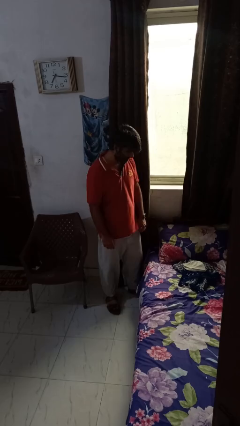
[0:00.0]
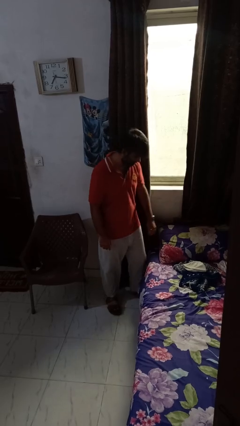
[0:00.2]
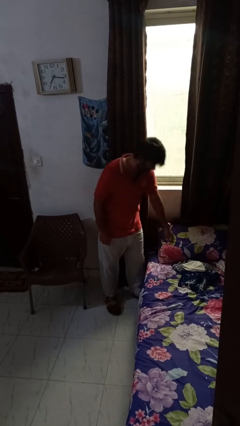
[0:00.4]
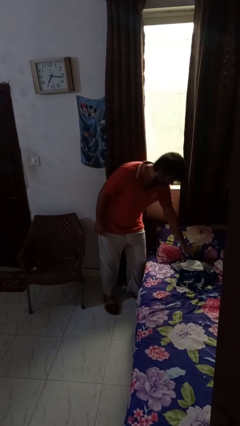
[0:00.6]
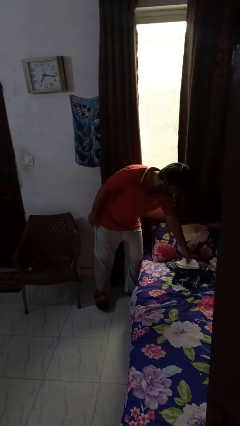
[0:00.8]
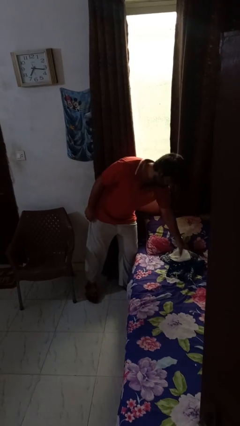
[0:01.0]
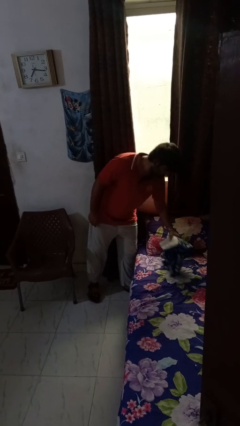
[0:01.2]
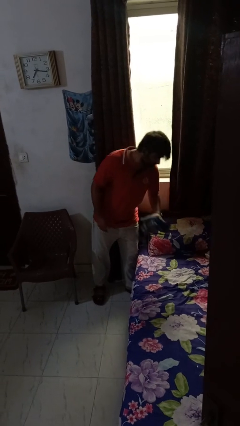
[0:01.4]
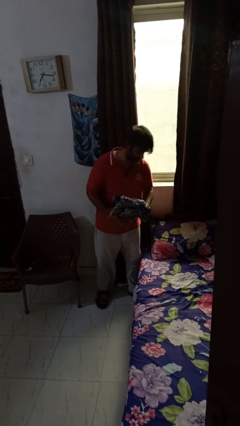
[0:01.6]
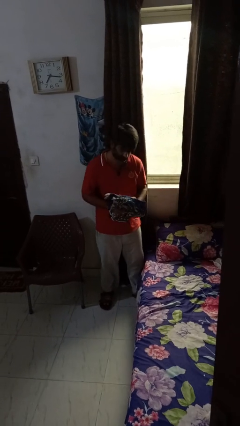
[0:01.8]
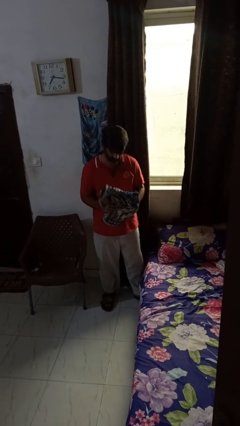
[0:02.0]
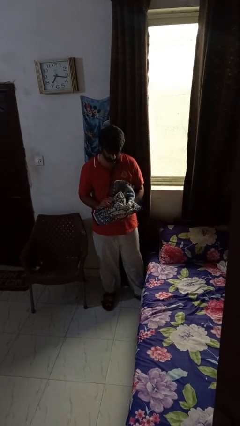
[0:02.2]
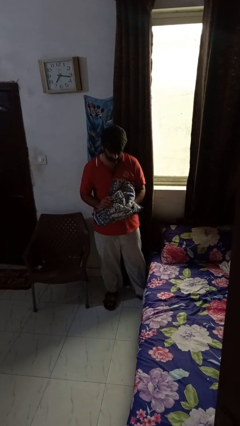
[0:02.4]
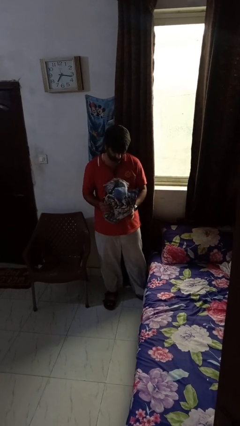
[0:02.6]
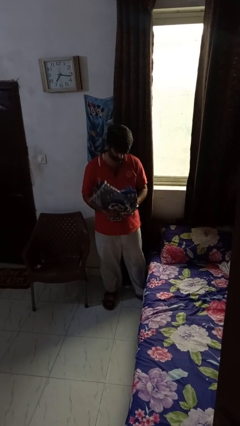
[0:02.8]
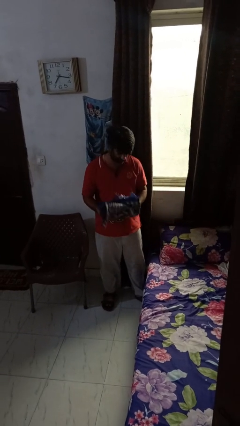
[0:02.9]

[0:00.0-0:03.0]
person picks up object from bed

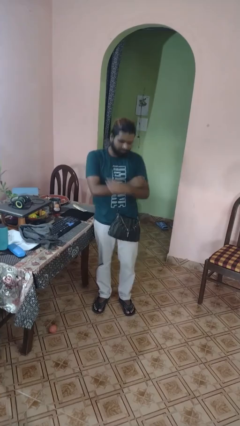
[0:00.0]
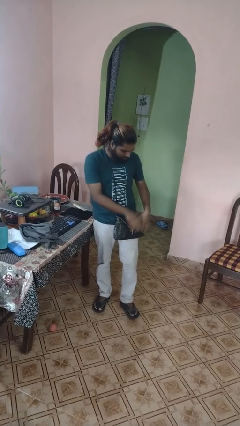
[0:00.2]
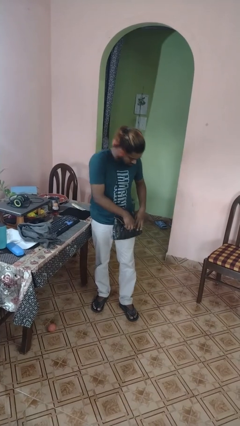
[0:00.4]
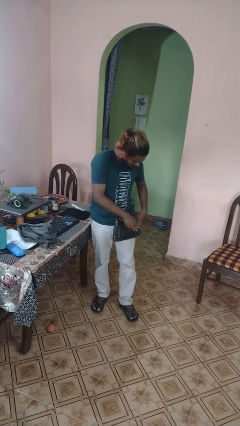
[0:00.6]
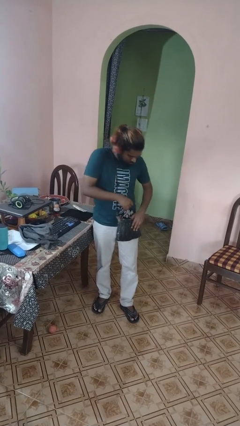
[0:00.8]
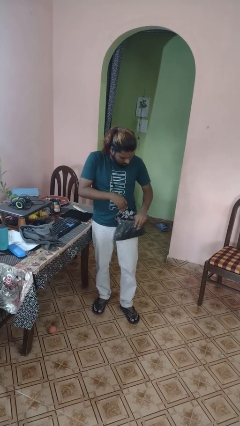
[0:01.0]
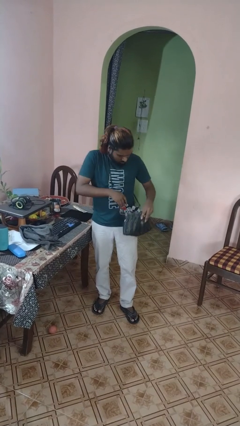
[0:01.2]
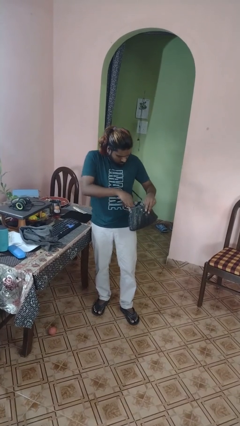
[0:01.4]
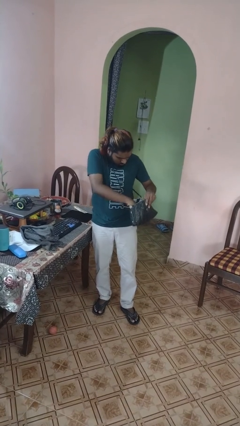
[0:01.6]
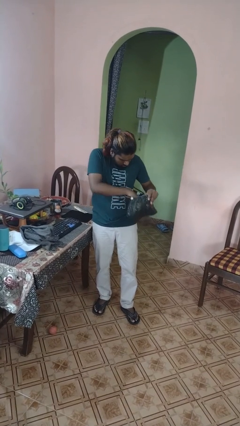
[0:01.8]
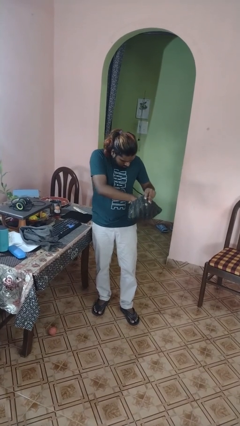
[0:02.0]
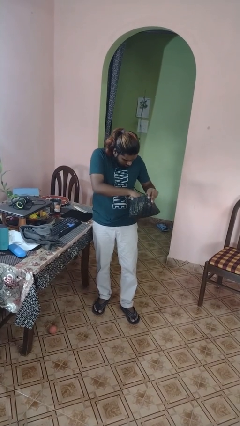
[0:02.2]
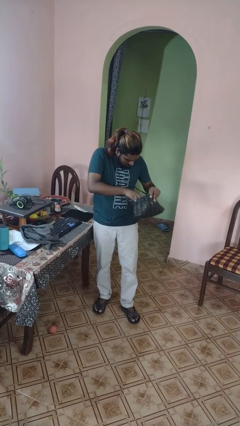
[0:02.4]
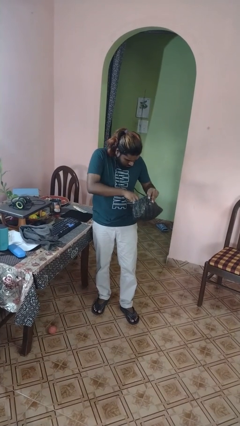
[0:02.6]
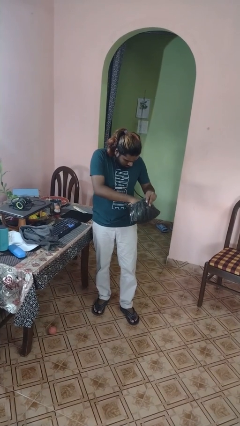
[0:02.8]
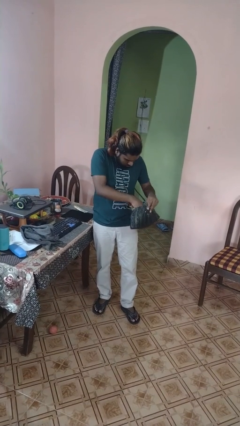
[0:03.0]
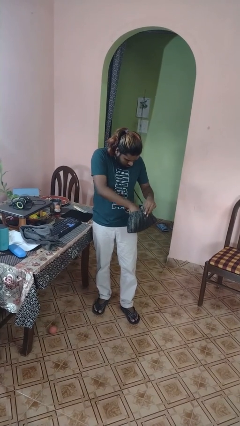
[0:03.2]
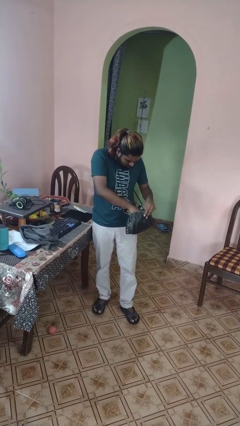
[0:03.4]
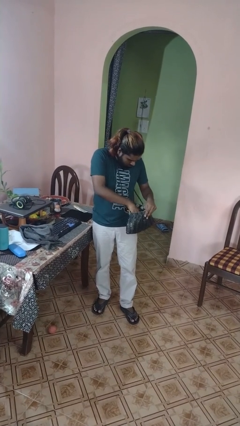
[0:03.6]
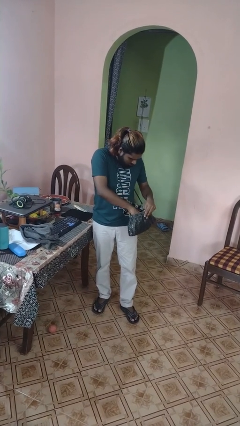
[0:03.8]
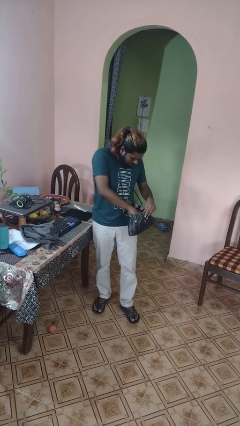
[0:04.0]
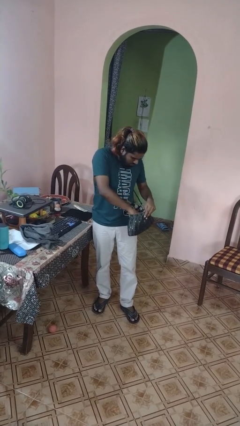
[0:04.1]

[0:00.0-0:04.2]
person searches in purse

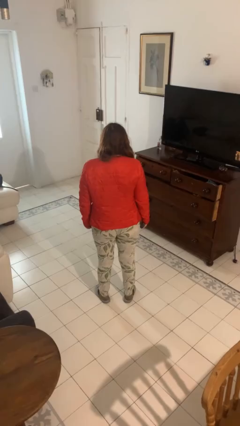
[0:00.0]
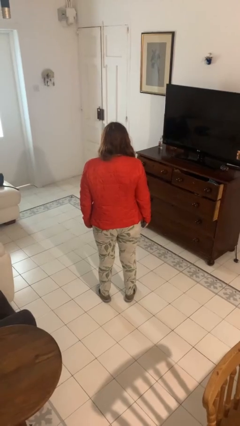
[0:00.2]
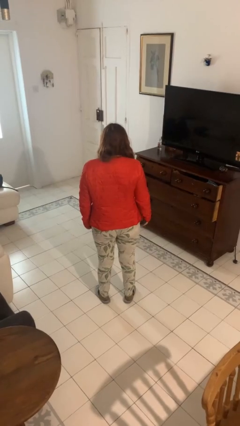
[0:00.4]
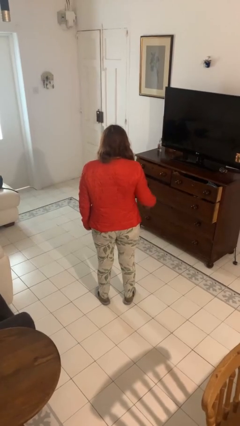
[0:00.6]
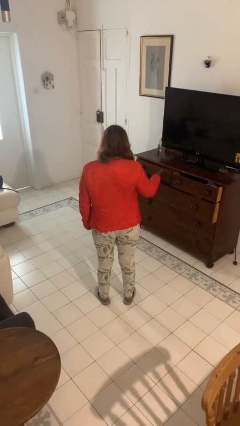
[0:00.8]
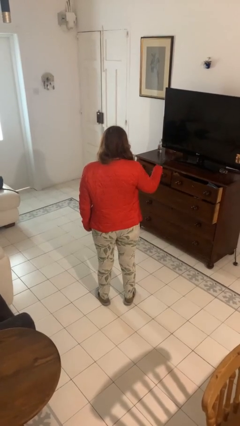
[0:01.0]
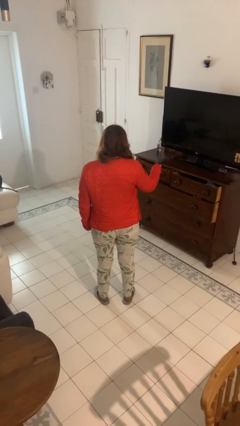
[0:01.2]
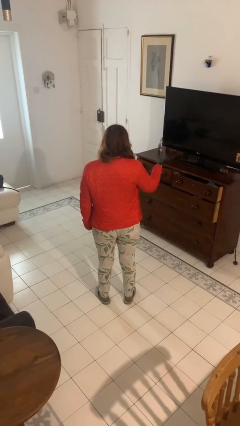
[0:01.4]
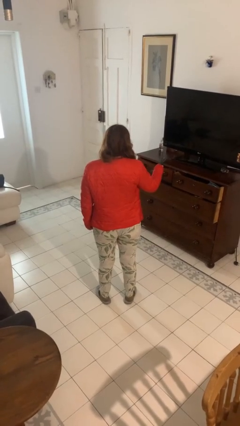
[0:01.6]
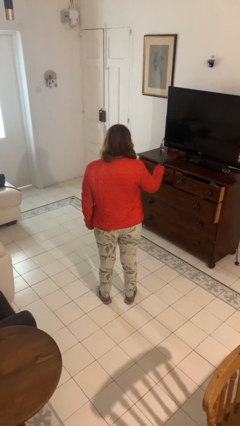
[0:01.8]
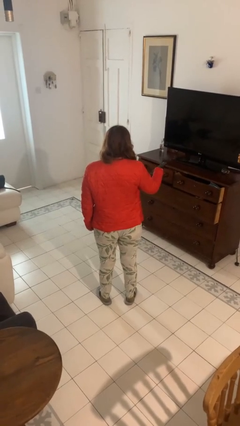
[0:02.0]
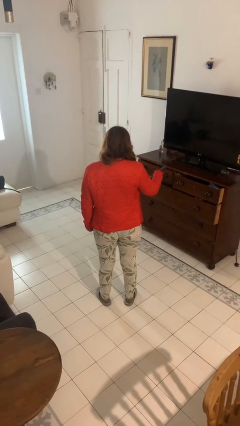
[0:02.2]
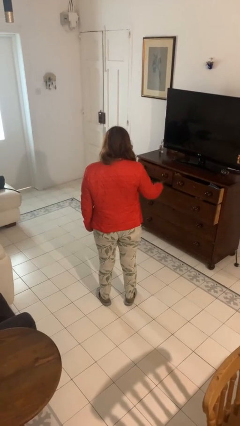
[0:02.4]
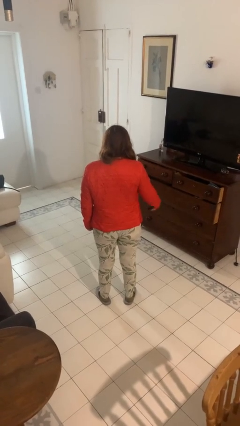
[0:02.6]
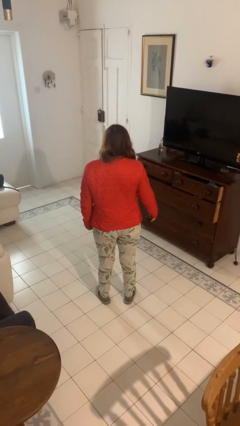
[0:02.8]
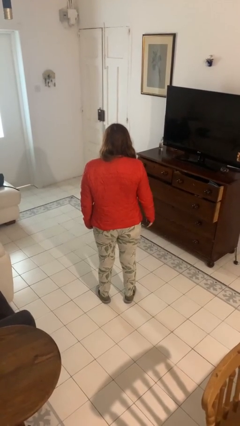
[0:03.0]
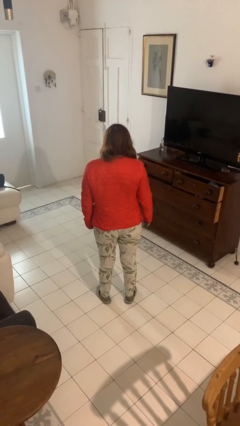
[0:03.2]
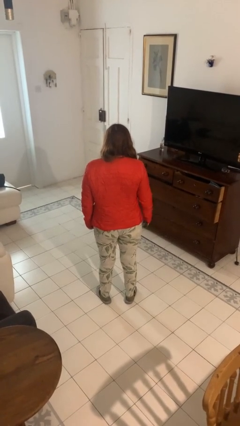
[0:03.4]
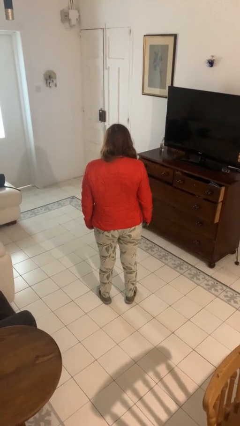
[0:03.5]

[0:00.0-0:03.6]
person uses television remote

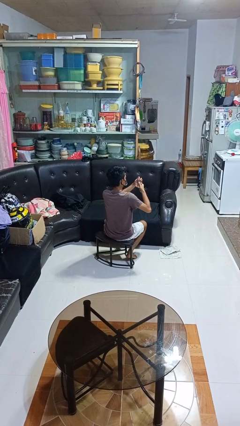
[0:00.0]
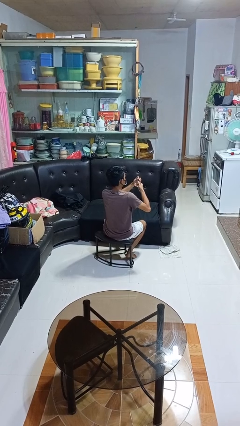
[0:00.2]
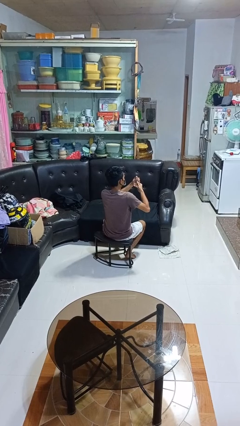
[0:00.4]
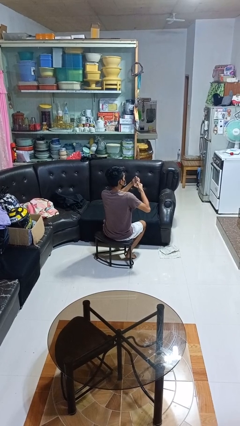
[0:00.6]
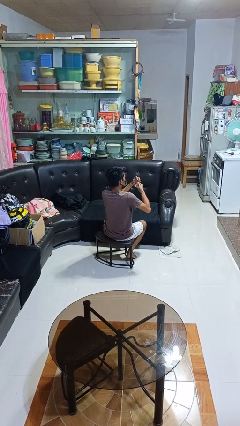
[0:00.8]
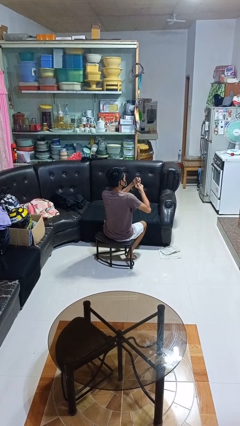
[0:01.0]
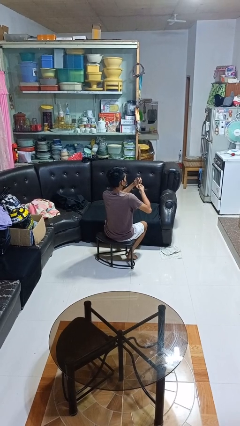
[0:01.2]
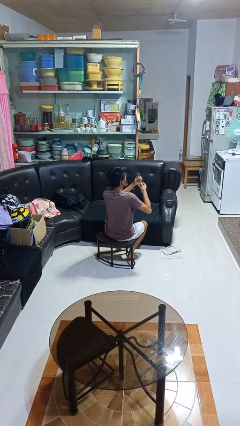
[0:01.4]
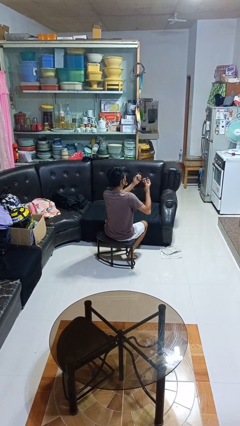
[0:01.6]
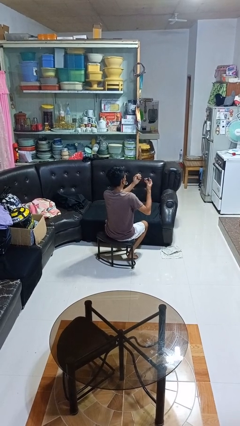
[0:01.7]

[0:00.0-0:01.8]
person clips fingernails

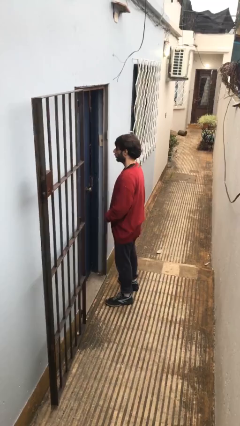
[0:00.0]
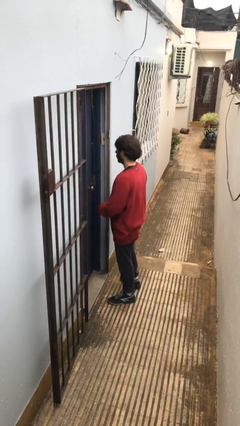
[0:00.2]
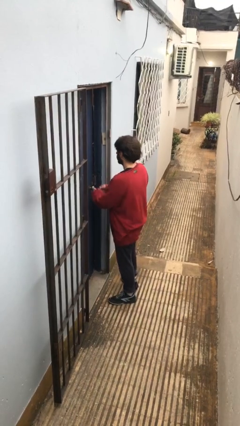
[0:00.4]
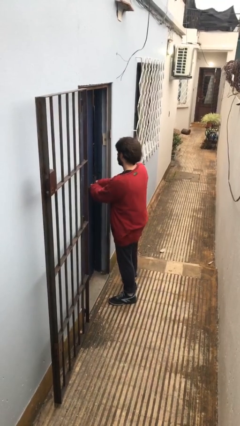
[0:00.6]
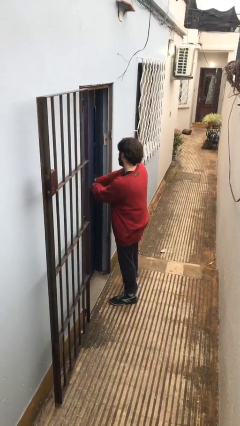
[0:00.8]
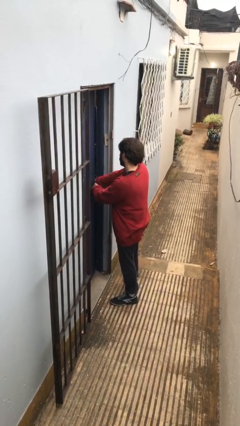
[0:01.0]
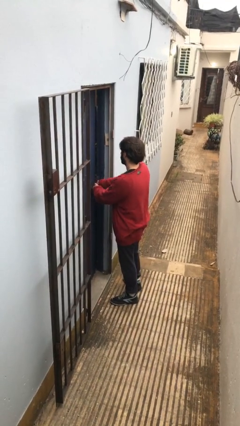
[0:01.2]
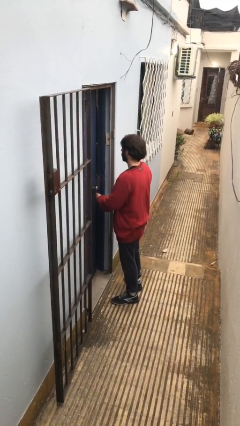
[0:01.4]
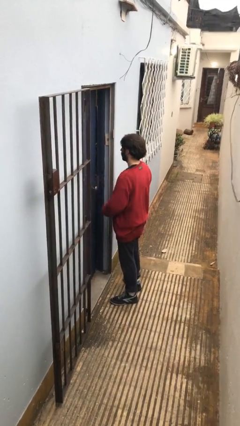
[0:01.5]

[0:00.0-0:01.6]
person unlocks door with keys

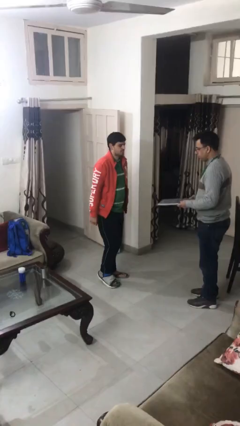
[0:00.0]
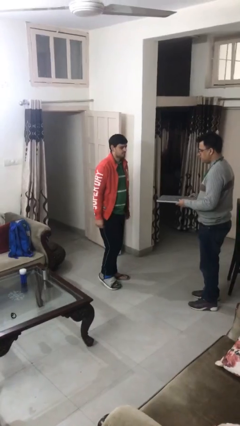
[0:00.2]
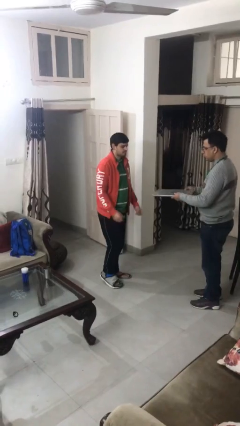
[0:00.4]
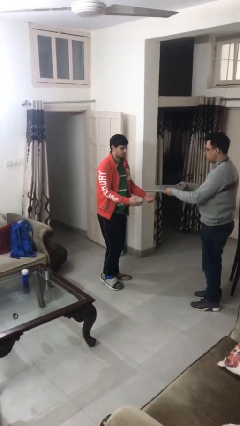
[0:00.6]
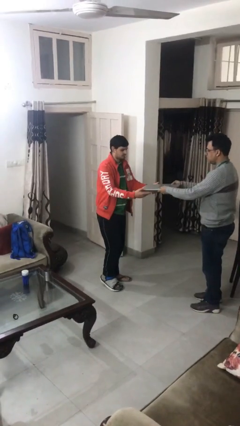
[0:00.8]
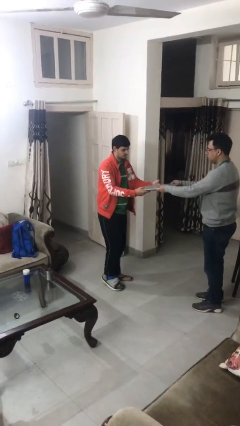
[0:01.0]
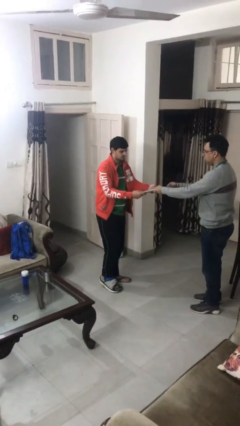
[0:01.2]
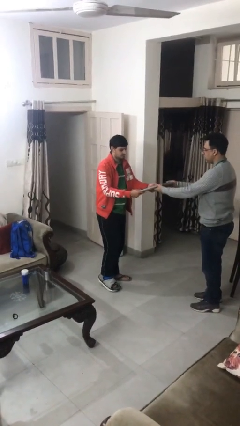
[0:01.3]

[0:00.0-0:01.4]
person transfers object to person

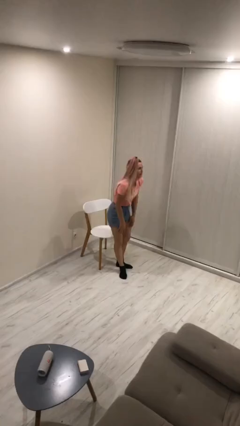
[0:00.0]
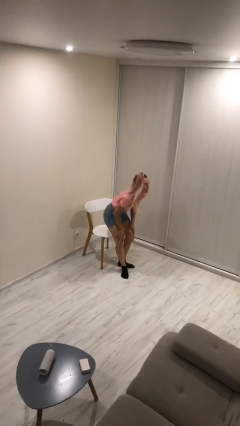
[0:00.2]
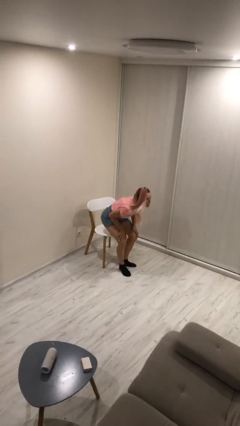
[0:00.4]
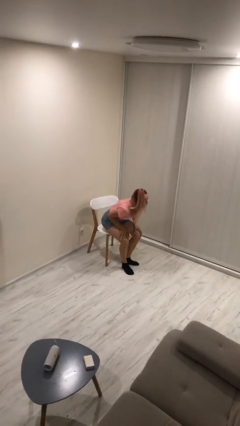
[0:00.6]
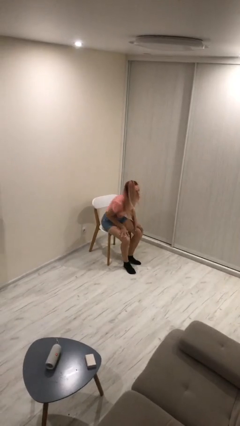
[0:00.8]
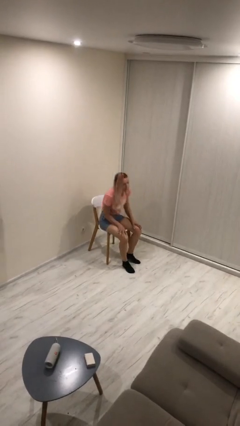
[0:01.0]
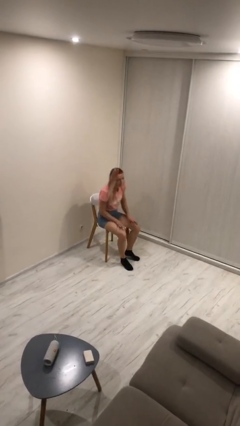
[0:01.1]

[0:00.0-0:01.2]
person sits down
